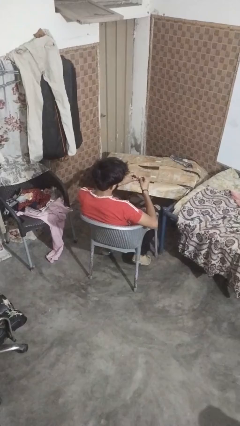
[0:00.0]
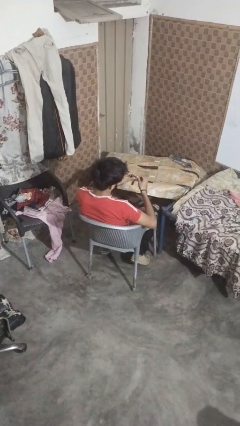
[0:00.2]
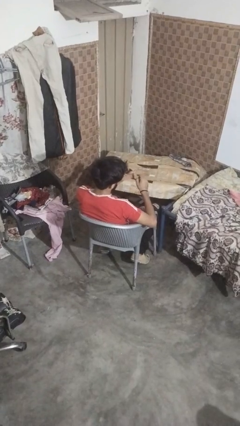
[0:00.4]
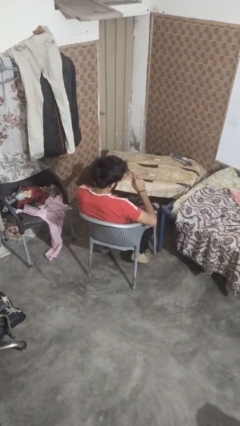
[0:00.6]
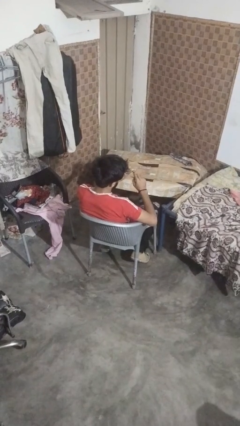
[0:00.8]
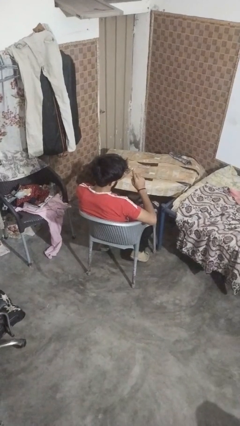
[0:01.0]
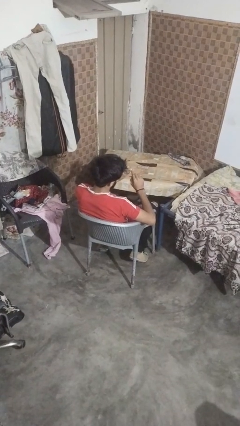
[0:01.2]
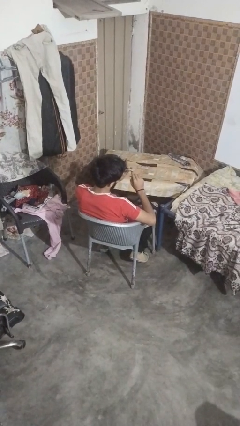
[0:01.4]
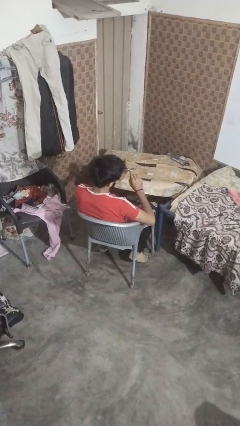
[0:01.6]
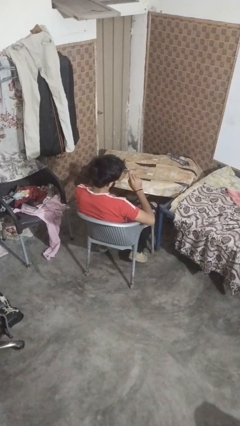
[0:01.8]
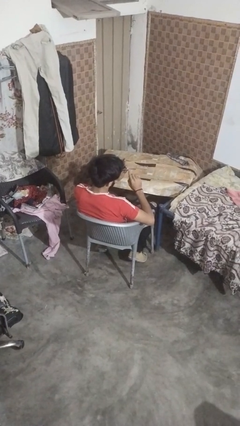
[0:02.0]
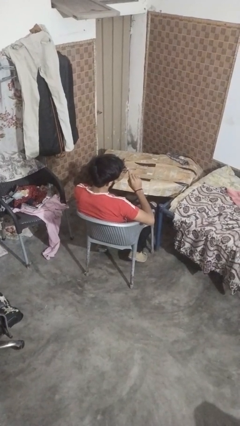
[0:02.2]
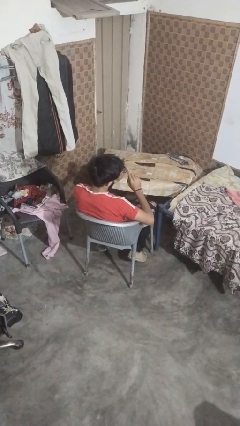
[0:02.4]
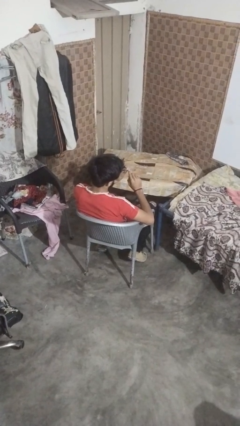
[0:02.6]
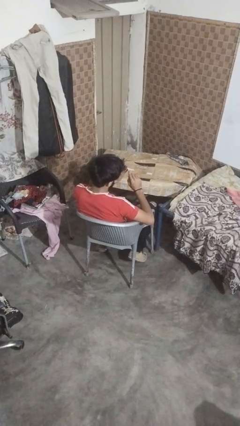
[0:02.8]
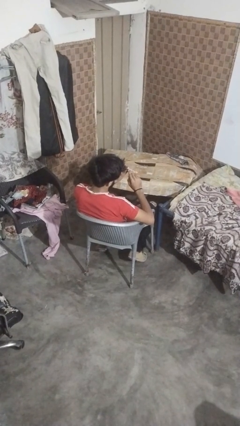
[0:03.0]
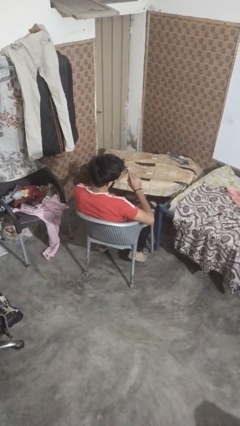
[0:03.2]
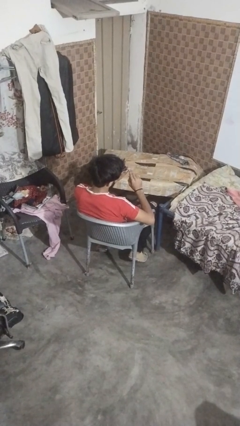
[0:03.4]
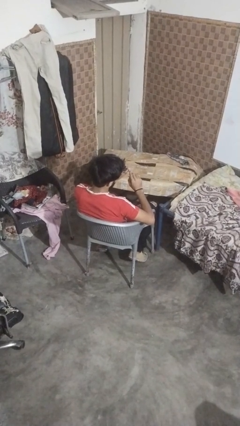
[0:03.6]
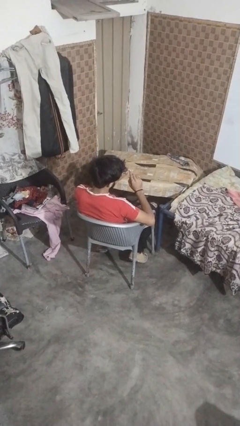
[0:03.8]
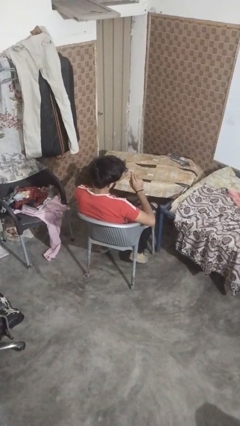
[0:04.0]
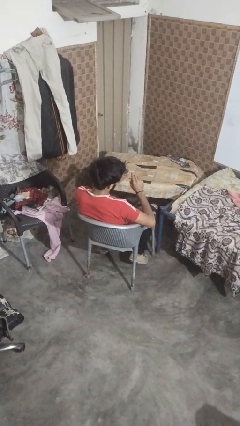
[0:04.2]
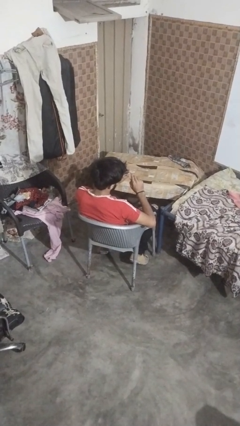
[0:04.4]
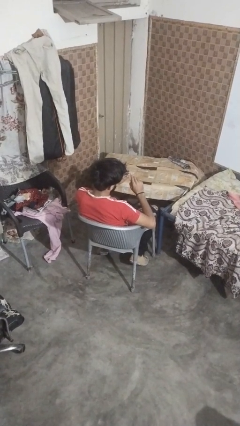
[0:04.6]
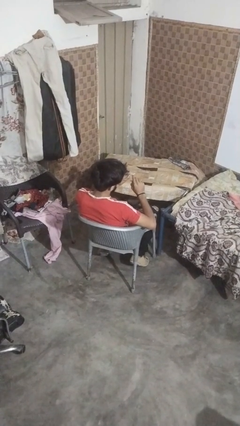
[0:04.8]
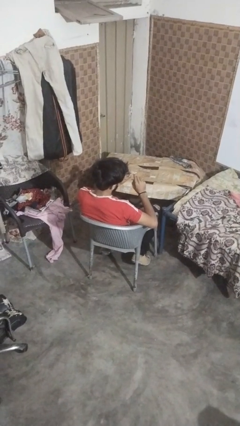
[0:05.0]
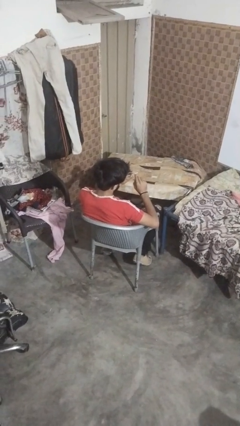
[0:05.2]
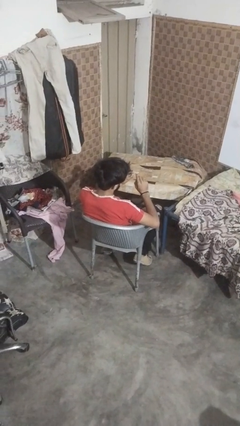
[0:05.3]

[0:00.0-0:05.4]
person files fingernails

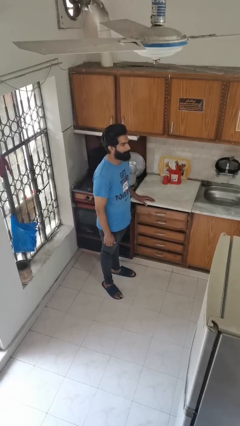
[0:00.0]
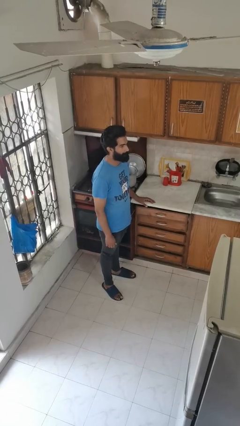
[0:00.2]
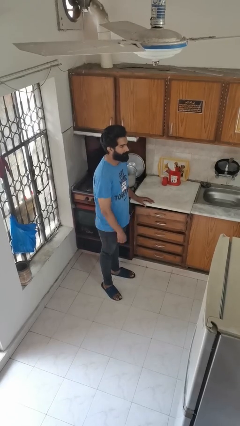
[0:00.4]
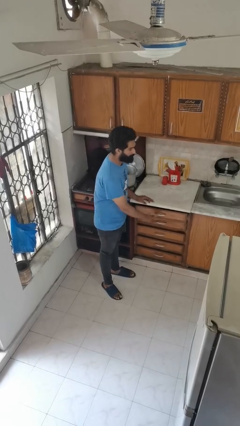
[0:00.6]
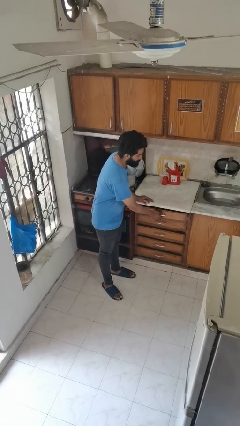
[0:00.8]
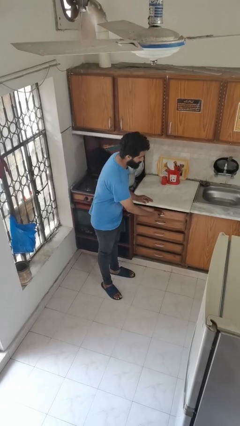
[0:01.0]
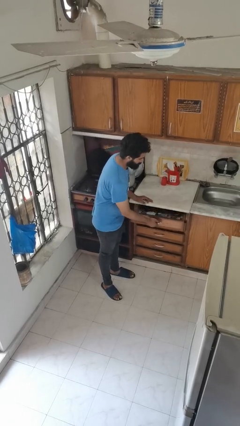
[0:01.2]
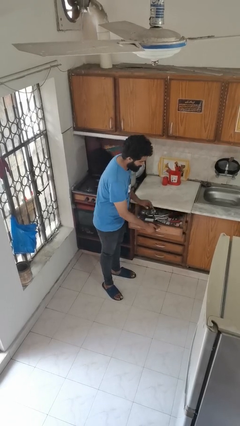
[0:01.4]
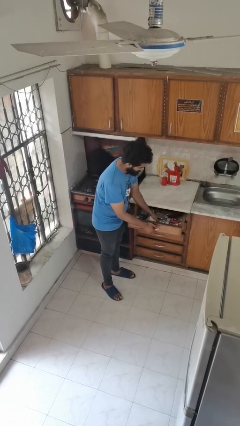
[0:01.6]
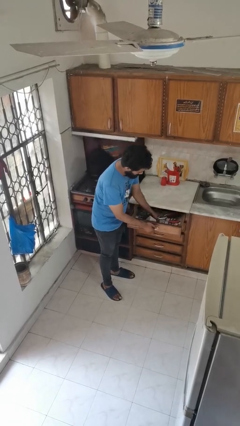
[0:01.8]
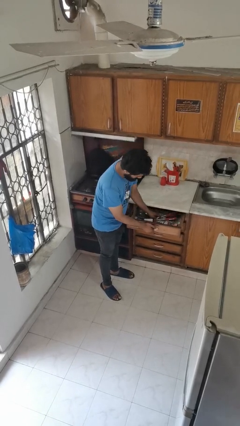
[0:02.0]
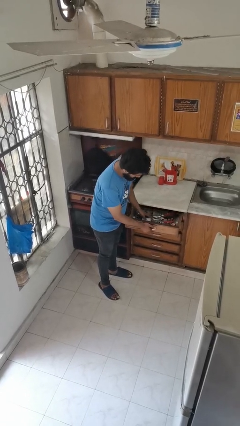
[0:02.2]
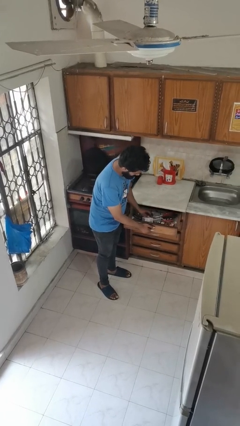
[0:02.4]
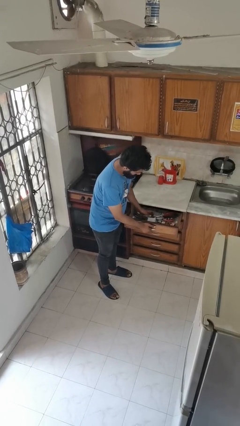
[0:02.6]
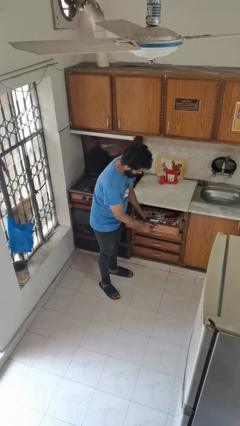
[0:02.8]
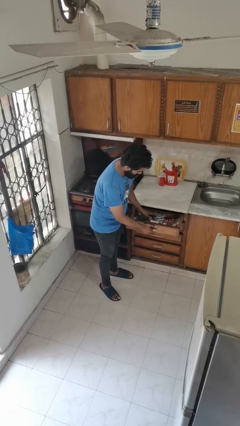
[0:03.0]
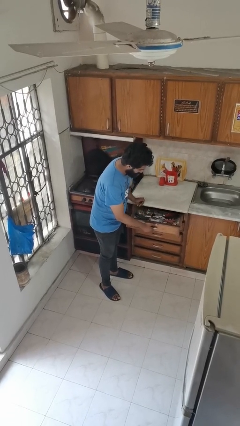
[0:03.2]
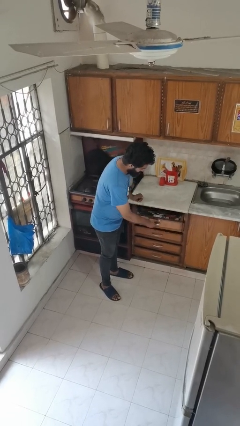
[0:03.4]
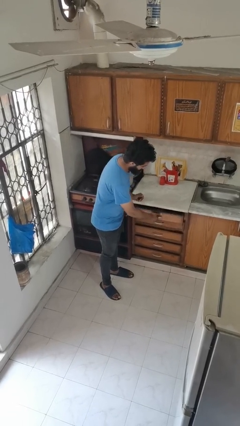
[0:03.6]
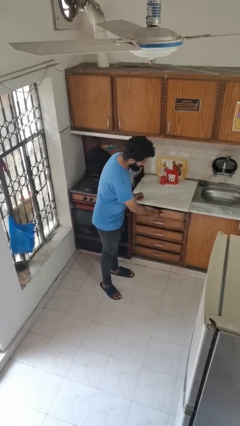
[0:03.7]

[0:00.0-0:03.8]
person searches in kitchen drawer

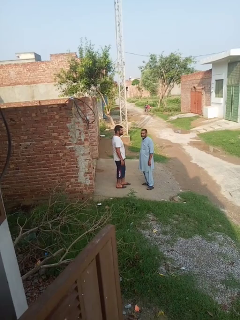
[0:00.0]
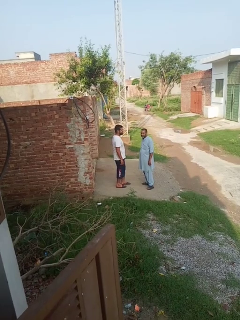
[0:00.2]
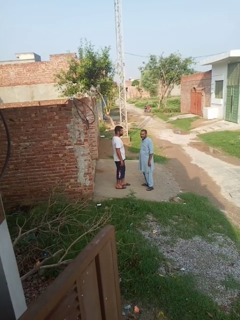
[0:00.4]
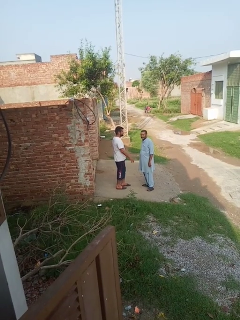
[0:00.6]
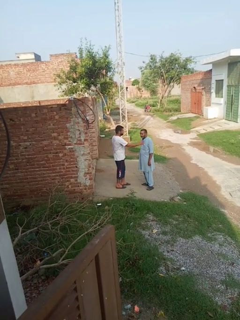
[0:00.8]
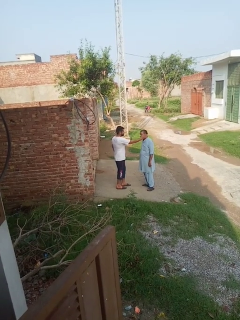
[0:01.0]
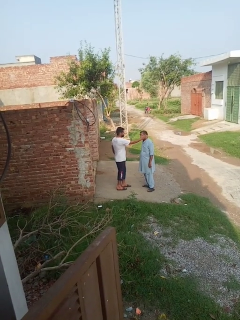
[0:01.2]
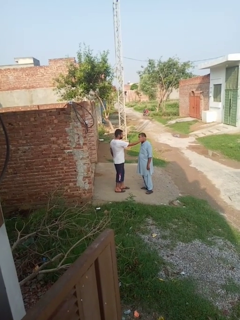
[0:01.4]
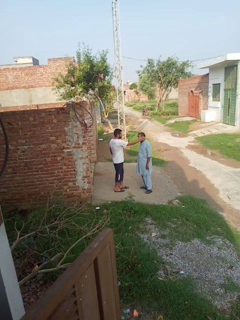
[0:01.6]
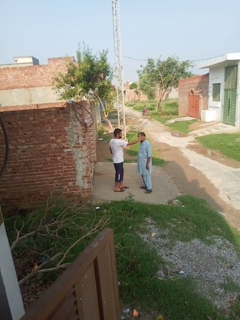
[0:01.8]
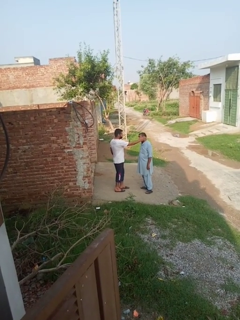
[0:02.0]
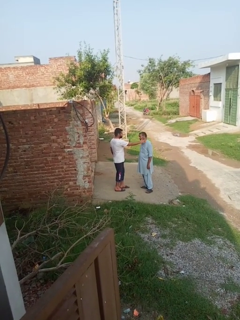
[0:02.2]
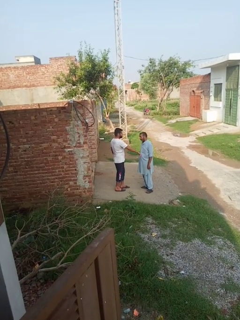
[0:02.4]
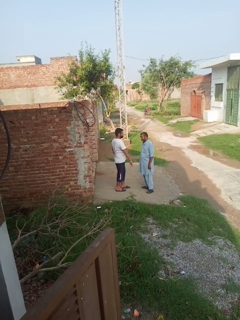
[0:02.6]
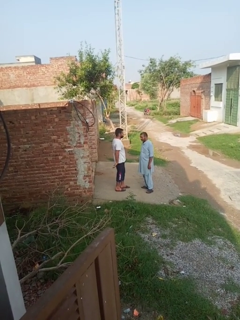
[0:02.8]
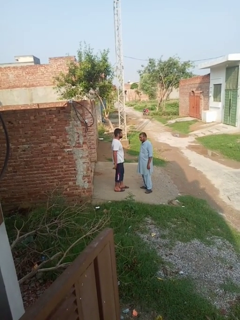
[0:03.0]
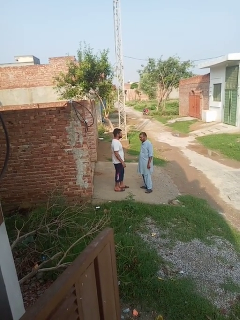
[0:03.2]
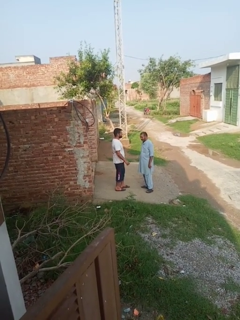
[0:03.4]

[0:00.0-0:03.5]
person touches face of person

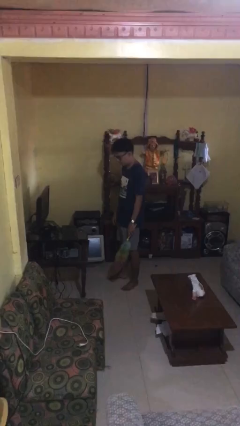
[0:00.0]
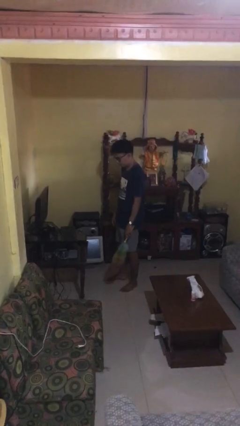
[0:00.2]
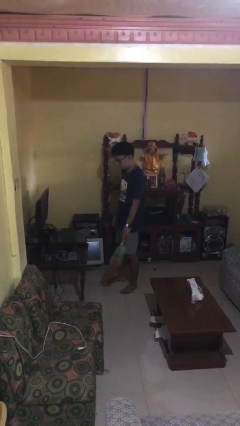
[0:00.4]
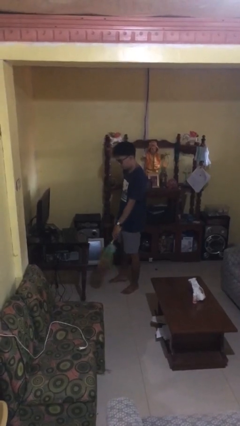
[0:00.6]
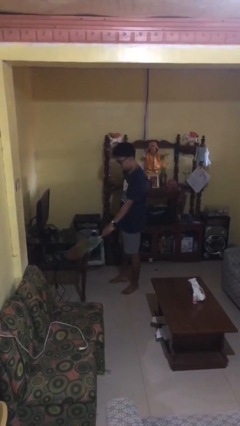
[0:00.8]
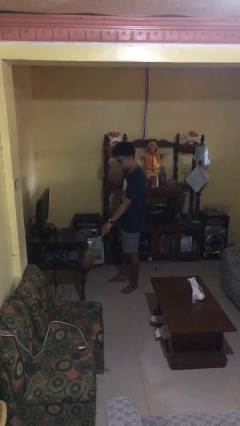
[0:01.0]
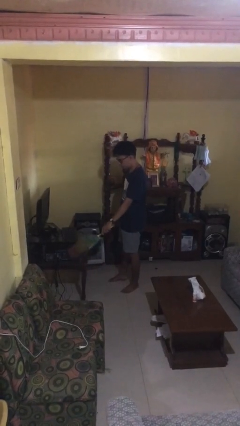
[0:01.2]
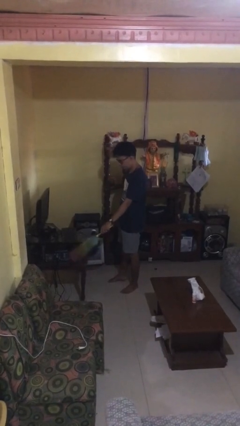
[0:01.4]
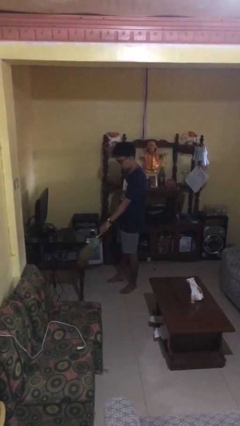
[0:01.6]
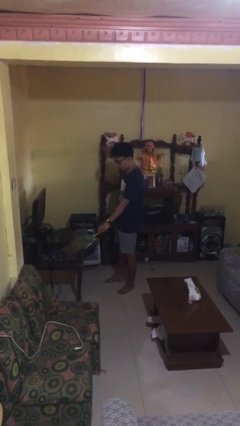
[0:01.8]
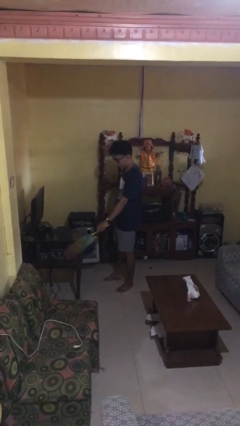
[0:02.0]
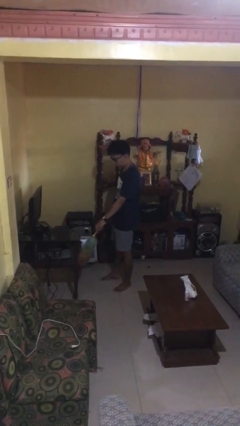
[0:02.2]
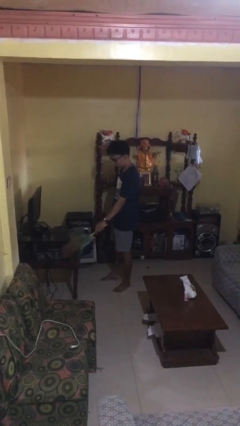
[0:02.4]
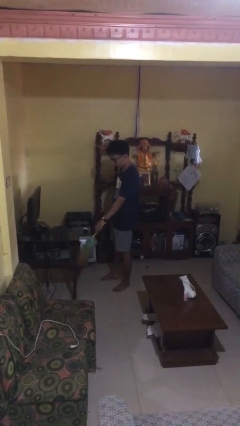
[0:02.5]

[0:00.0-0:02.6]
person dusts furniture

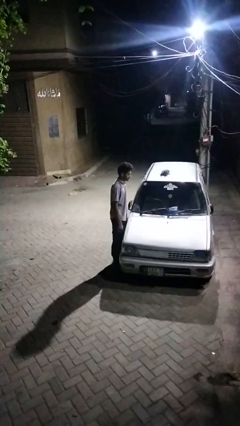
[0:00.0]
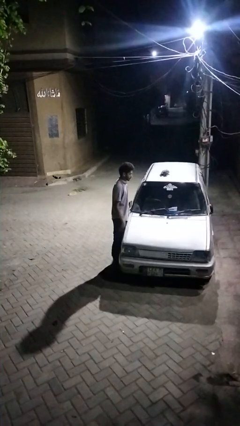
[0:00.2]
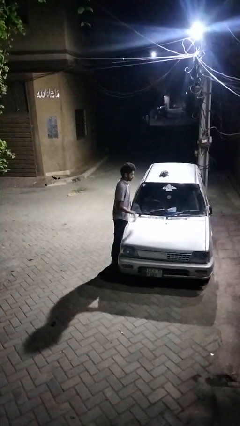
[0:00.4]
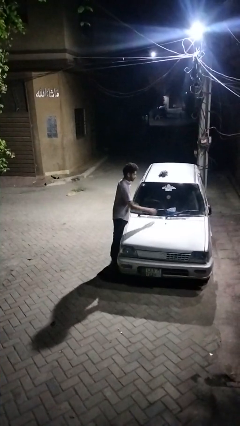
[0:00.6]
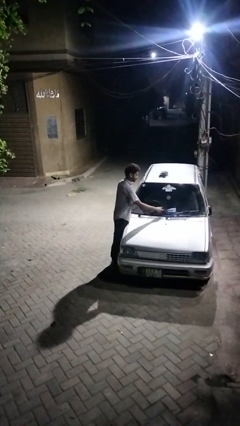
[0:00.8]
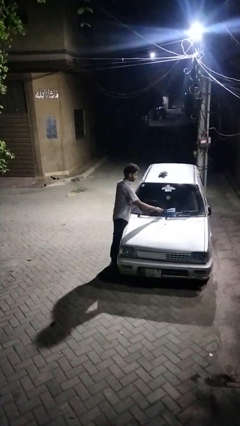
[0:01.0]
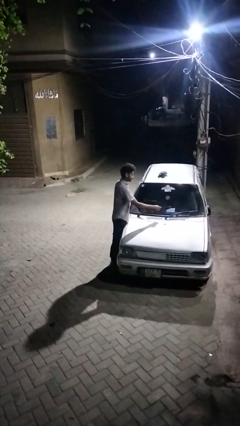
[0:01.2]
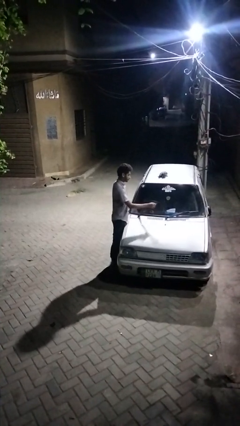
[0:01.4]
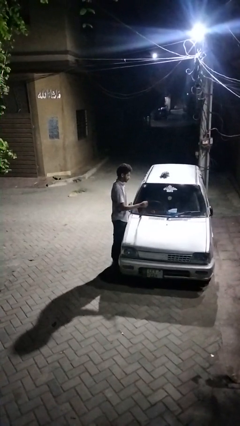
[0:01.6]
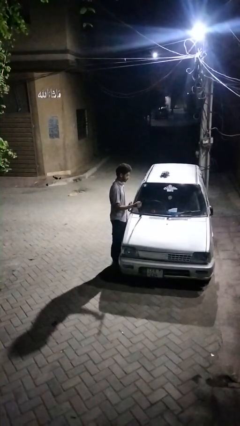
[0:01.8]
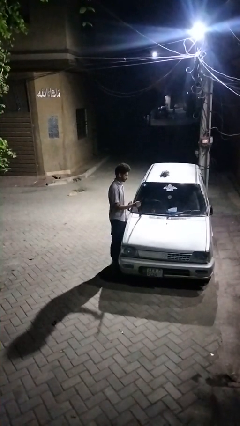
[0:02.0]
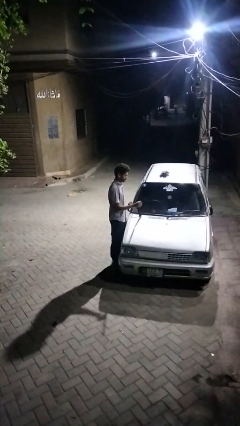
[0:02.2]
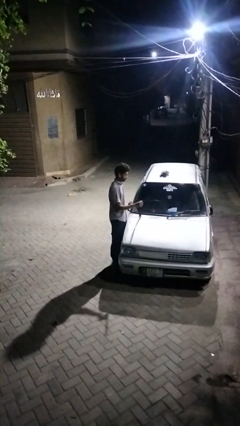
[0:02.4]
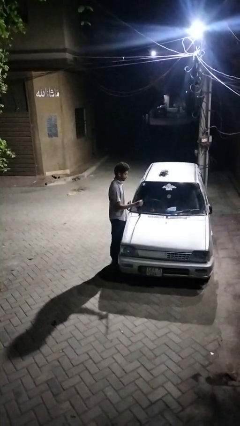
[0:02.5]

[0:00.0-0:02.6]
person flips up car wipers

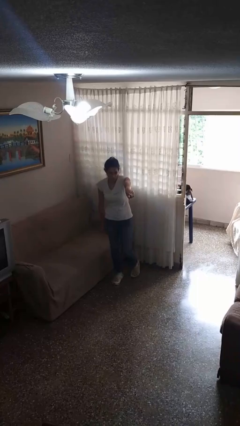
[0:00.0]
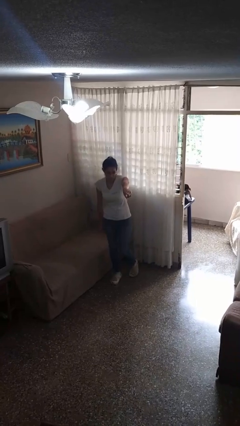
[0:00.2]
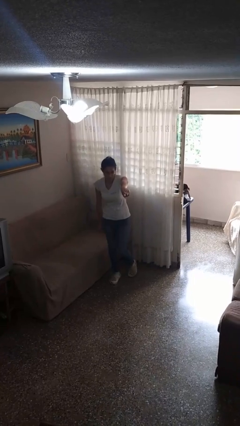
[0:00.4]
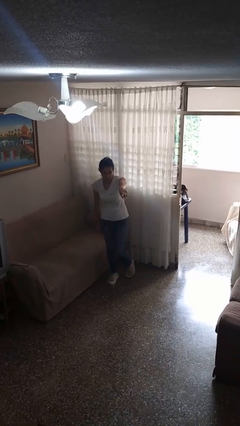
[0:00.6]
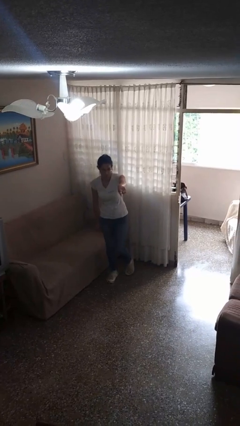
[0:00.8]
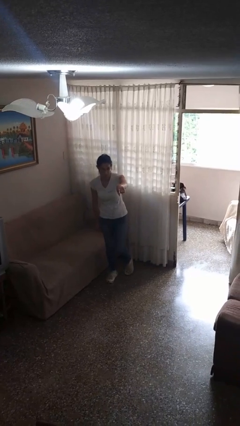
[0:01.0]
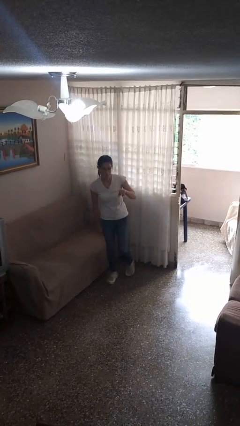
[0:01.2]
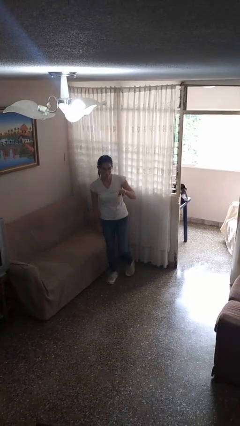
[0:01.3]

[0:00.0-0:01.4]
person points at person
